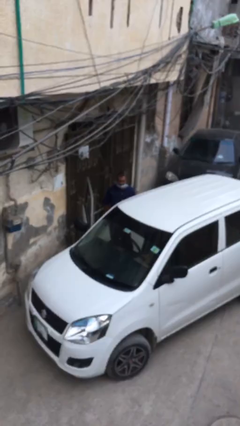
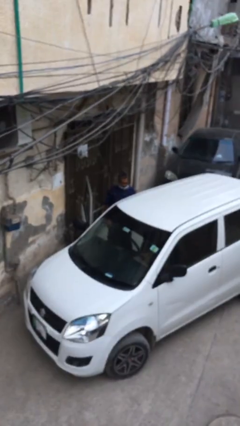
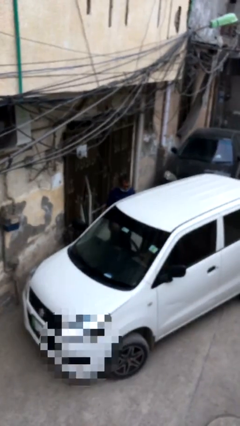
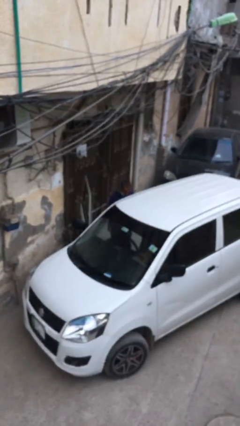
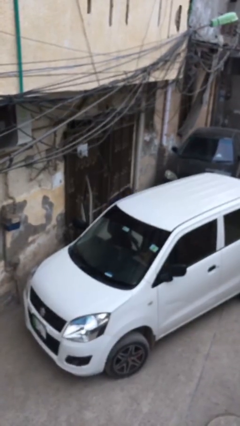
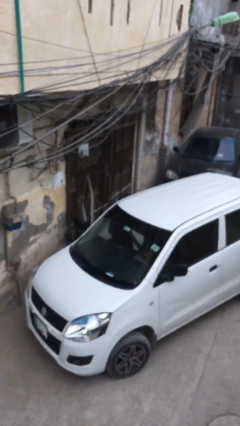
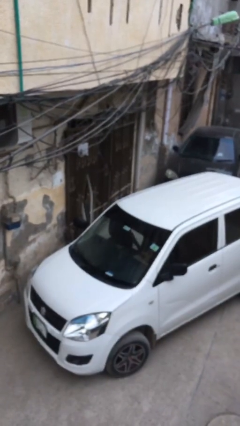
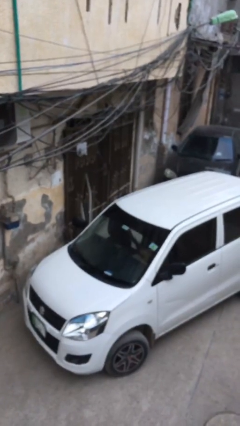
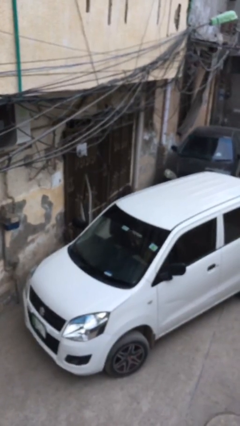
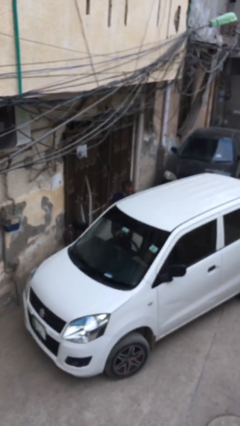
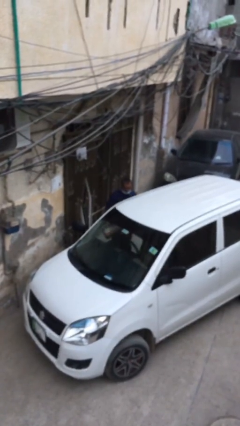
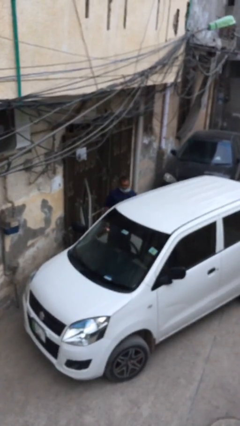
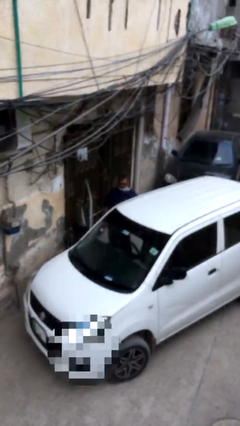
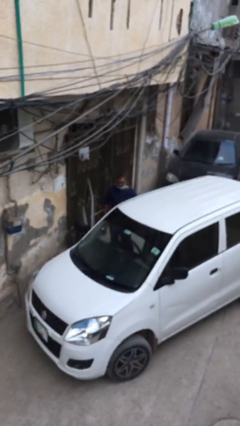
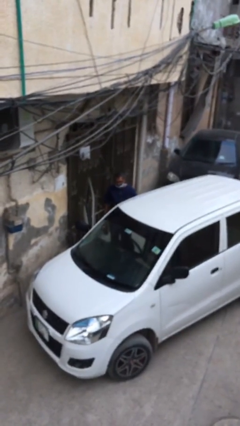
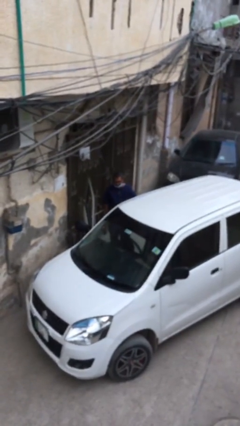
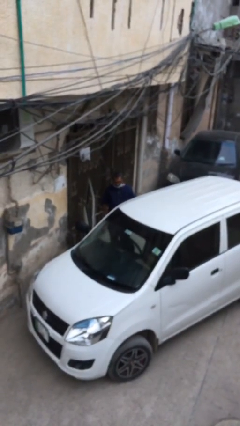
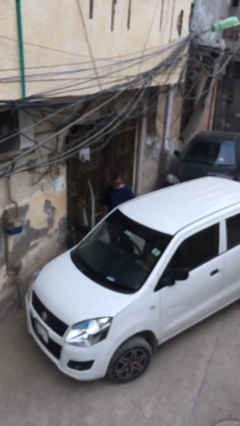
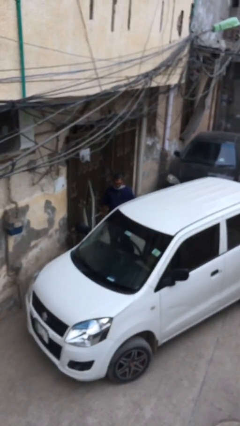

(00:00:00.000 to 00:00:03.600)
person unloads car

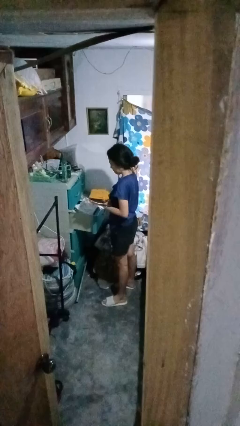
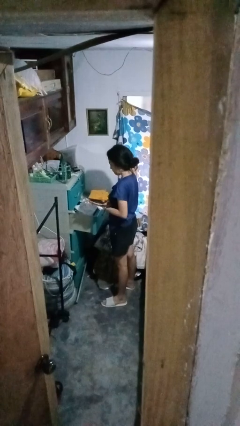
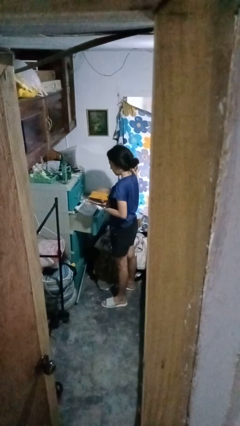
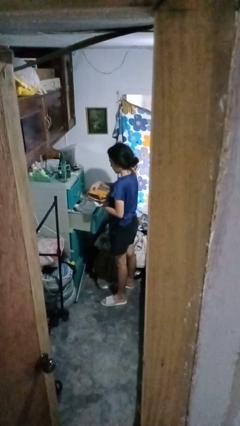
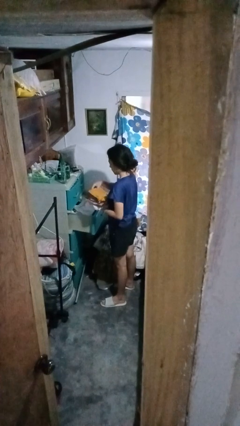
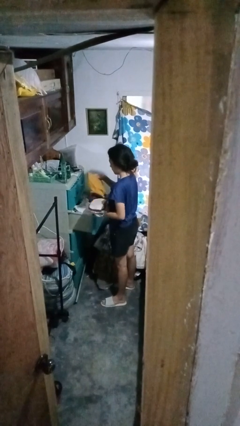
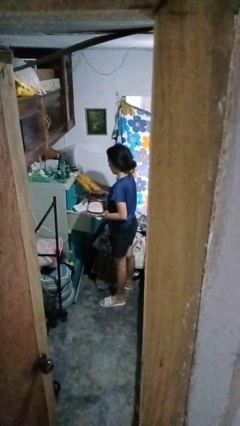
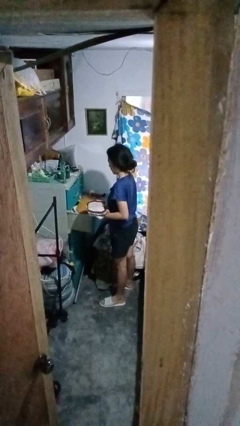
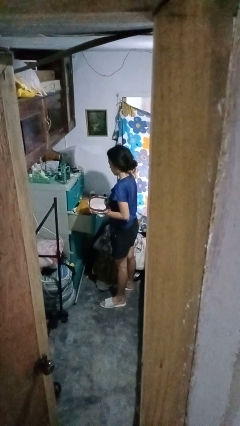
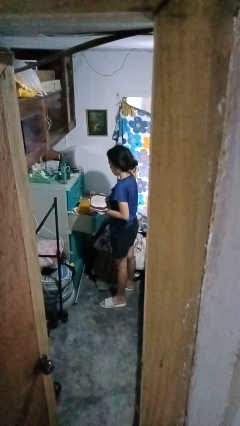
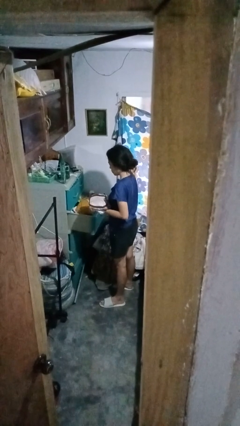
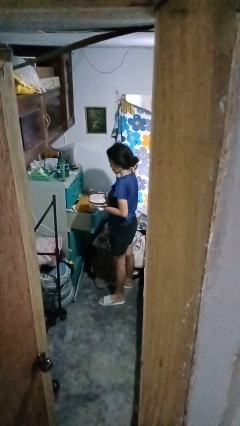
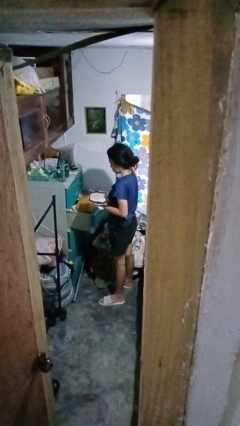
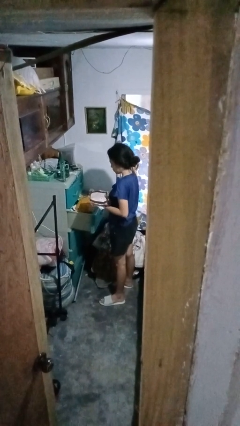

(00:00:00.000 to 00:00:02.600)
person puts clothes into dresser

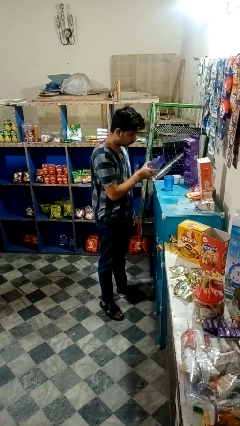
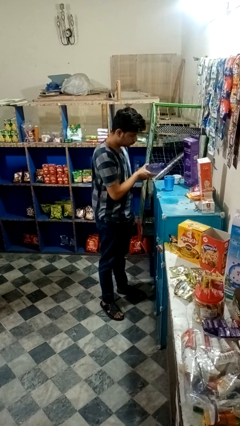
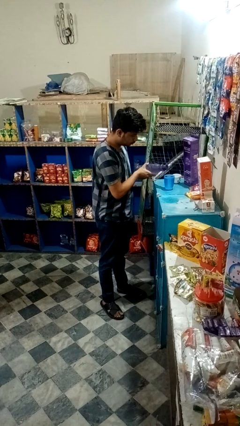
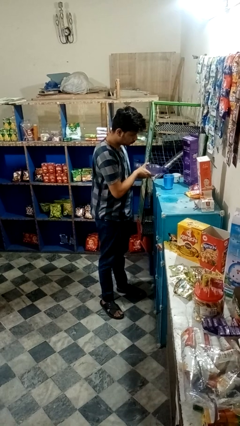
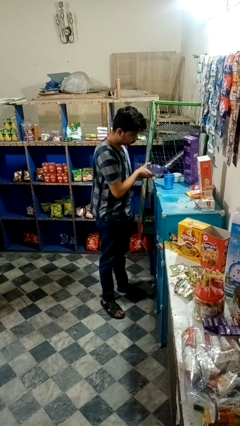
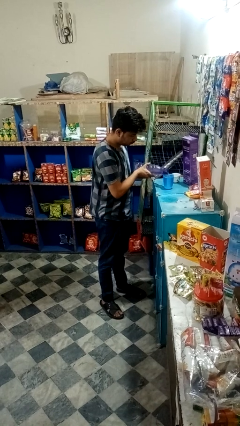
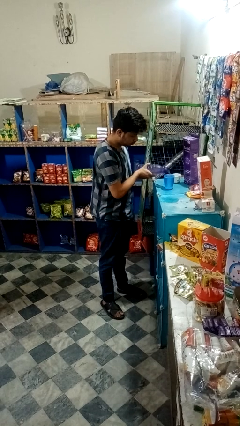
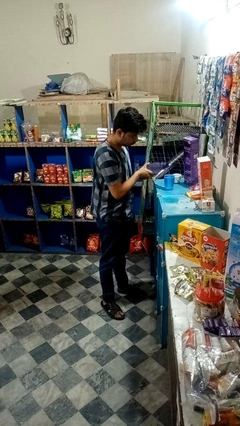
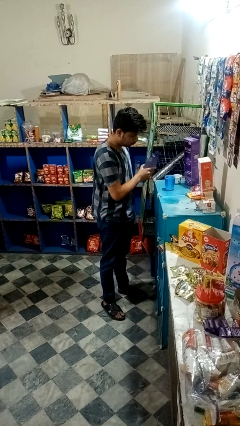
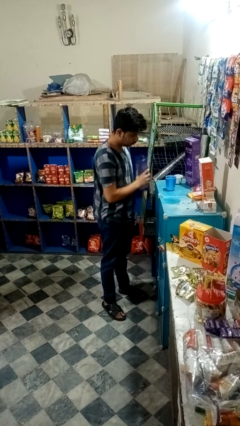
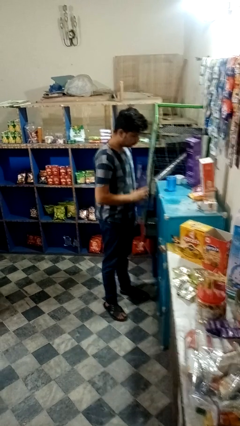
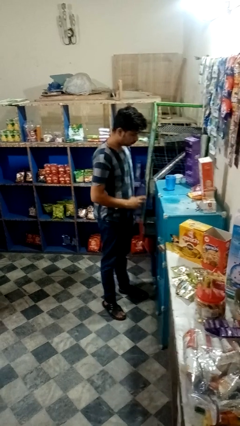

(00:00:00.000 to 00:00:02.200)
person pours liquid into cup

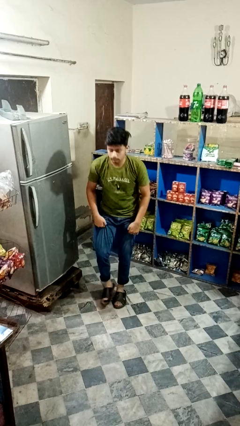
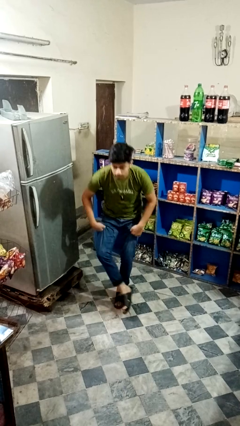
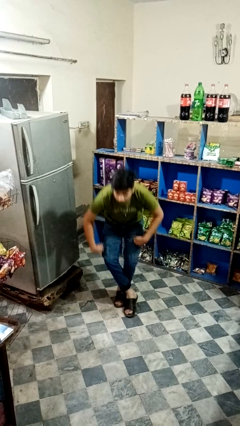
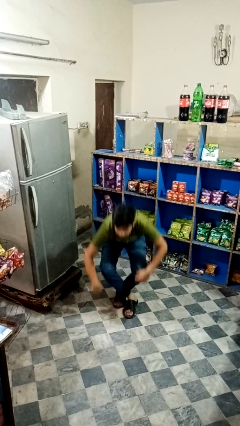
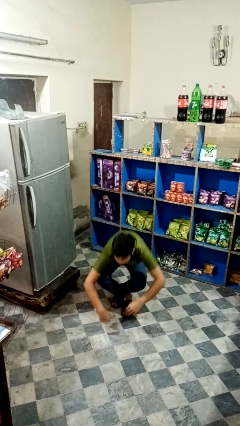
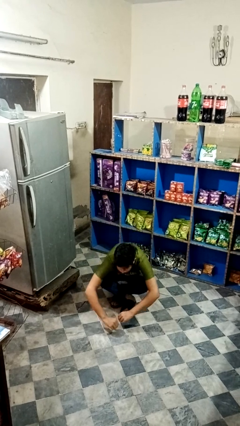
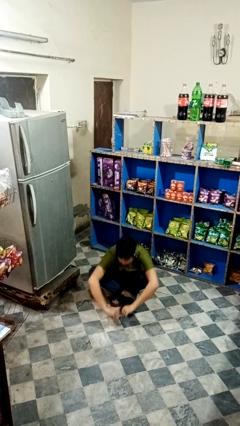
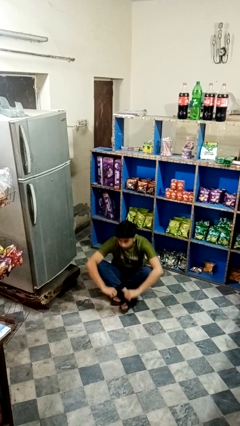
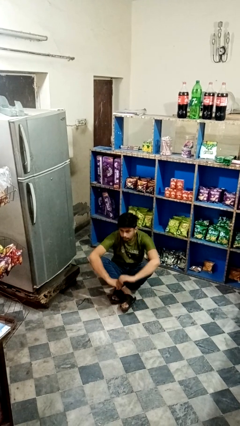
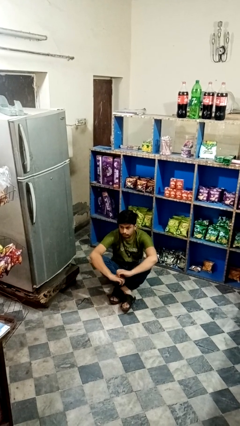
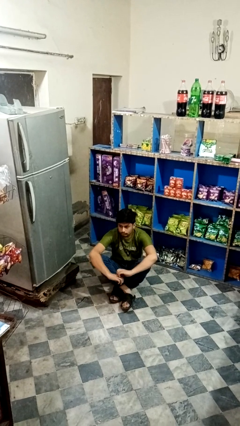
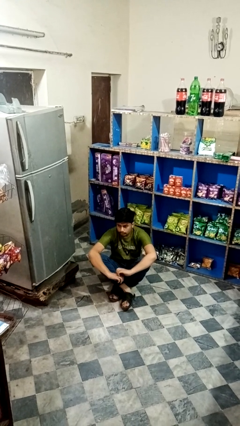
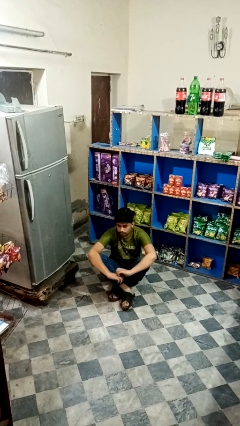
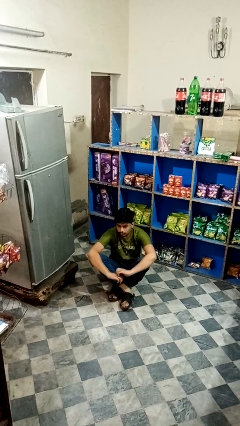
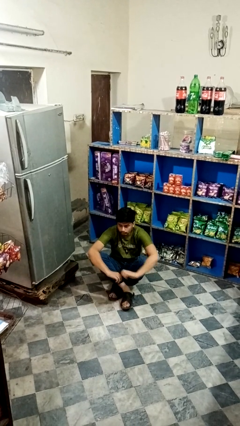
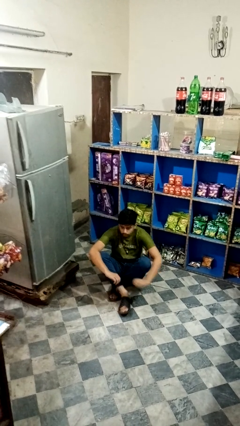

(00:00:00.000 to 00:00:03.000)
person sits crisscross

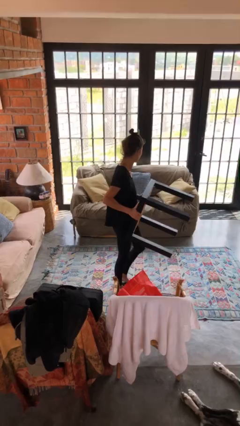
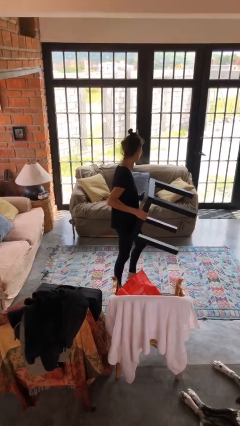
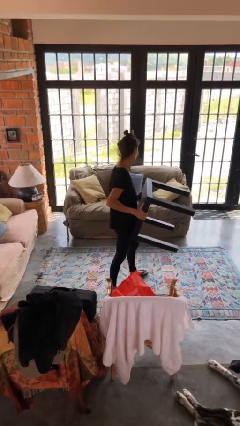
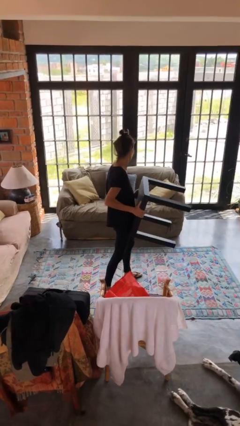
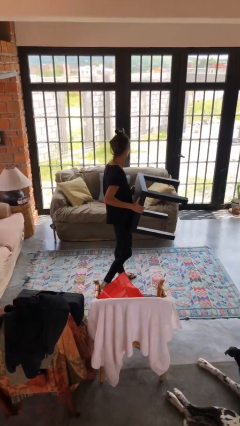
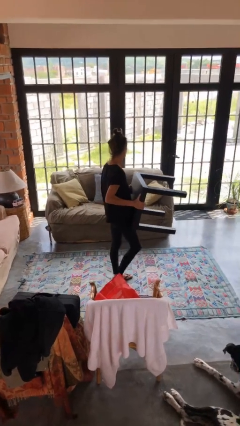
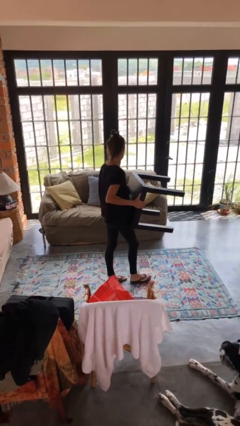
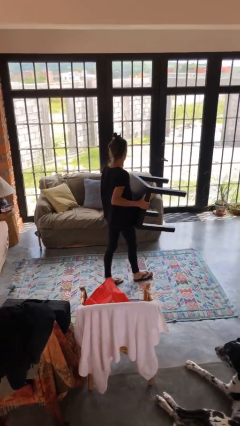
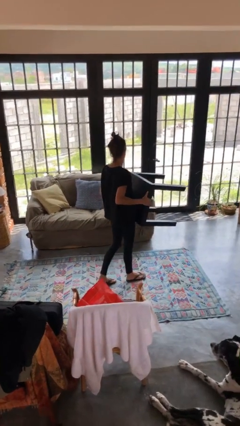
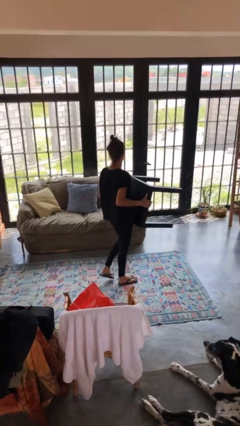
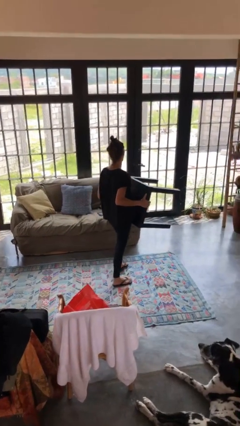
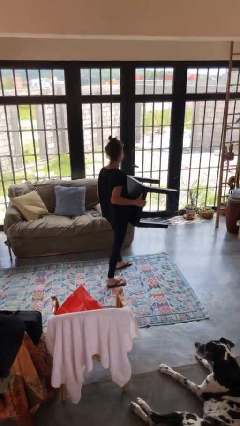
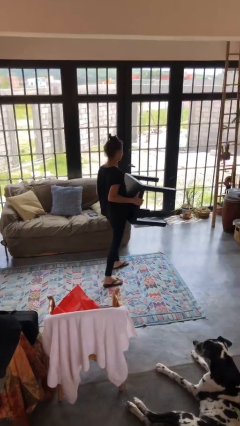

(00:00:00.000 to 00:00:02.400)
person carries furniture

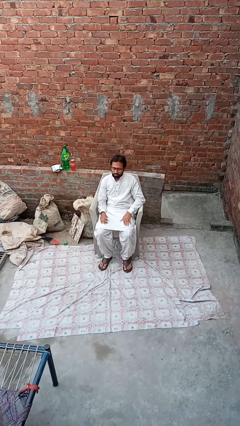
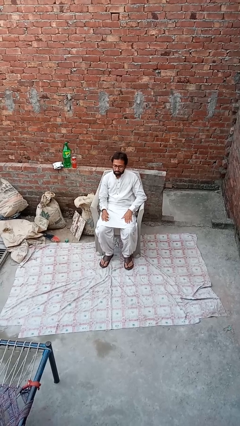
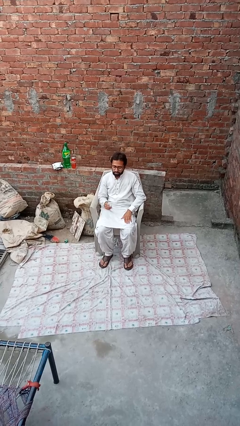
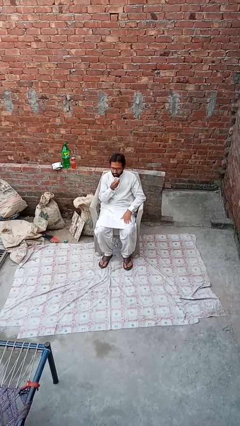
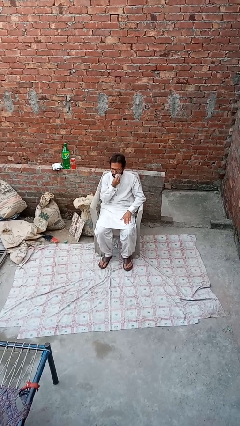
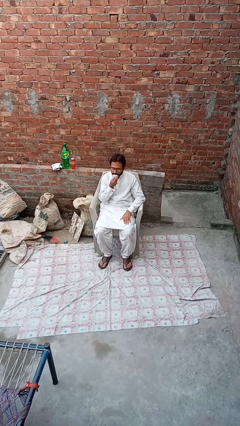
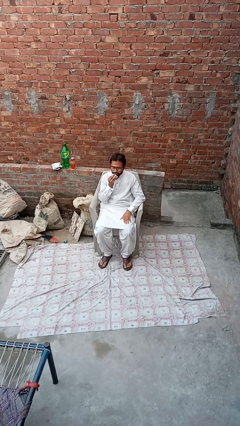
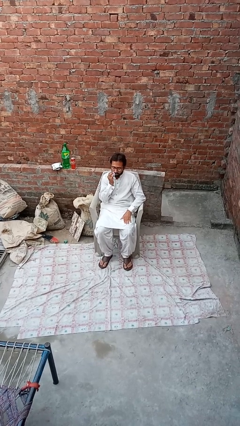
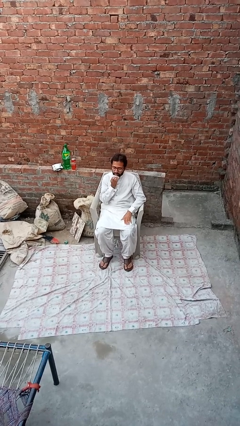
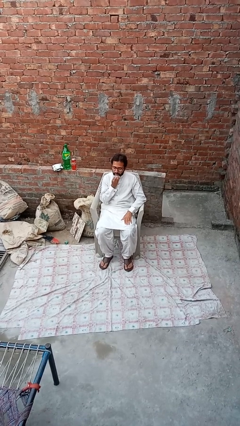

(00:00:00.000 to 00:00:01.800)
person wipes mouth with napkin

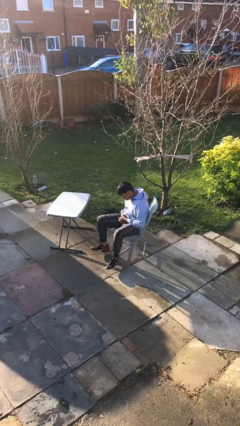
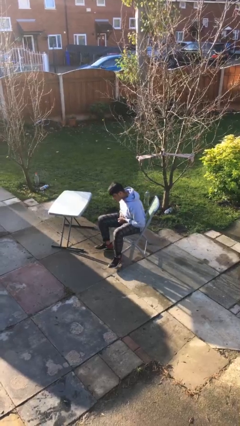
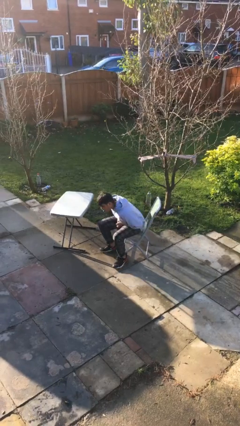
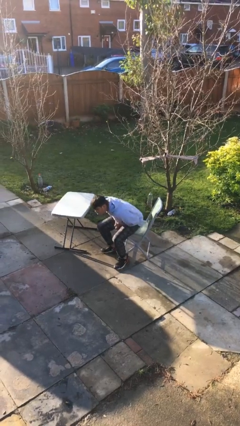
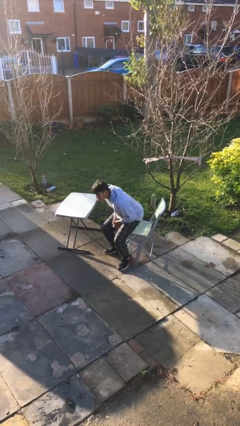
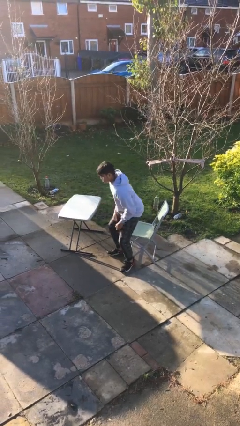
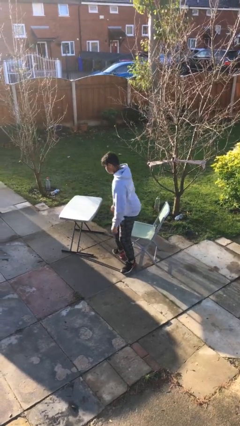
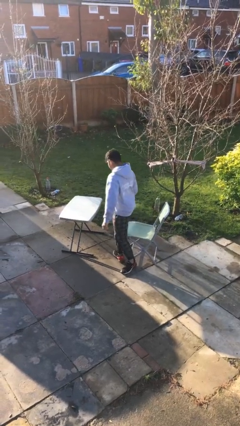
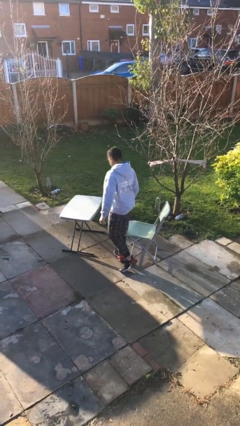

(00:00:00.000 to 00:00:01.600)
person stands up
